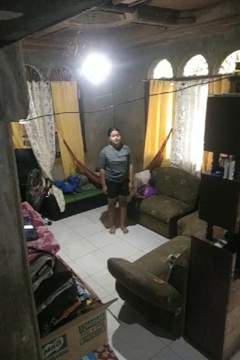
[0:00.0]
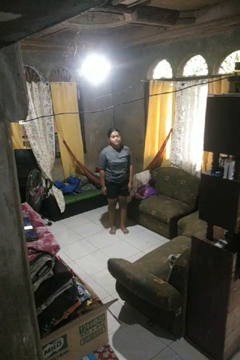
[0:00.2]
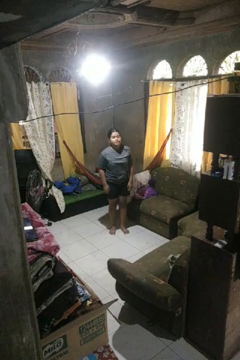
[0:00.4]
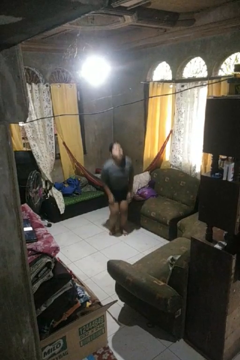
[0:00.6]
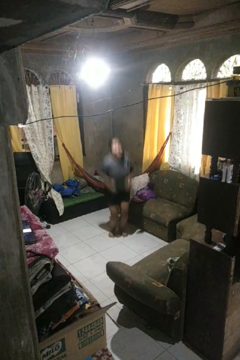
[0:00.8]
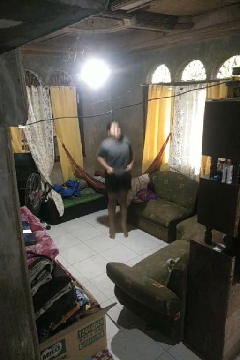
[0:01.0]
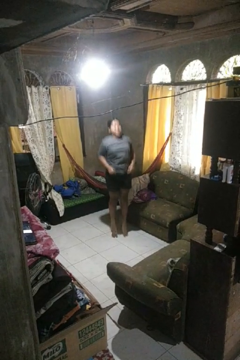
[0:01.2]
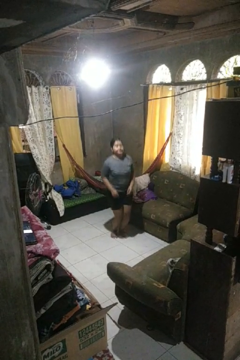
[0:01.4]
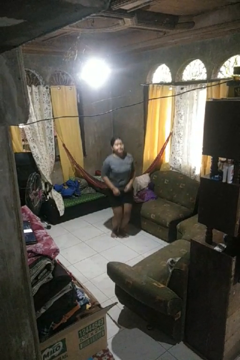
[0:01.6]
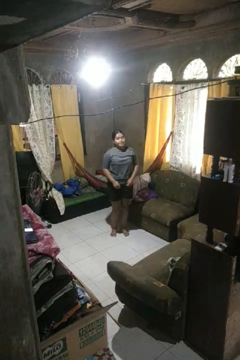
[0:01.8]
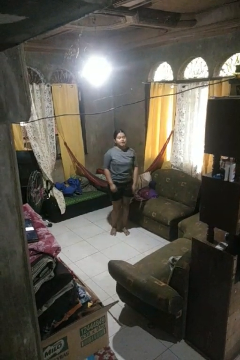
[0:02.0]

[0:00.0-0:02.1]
person jumps

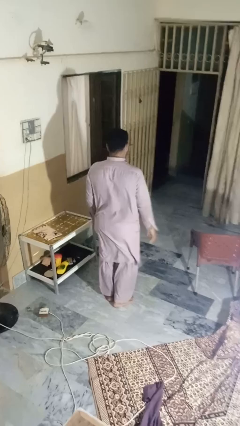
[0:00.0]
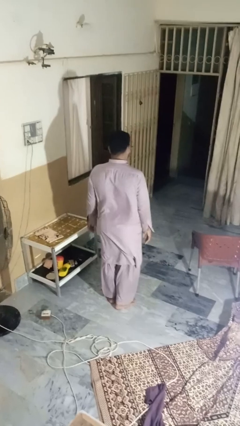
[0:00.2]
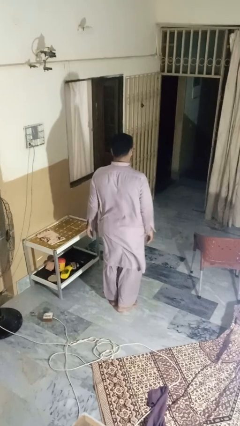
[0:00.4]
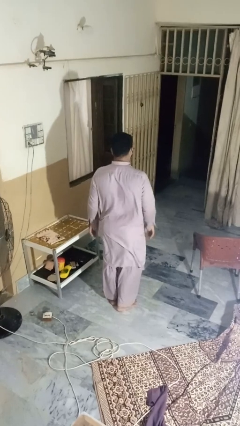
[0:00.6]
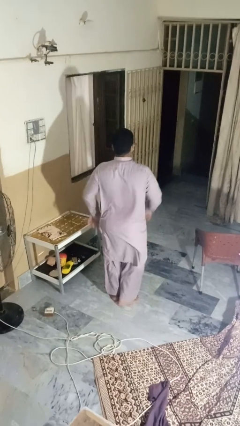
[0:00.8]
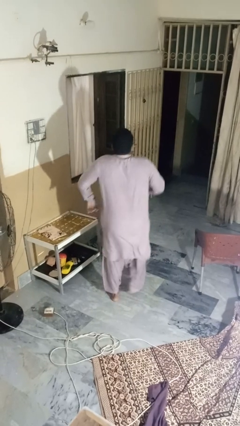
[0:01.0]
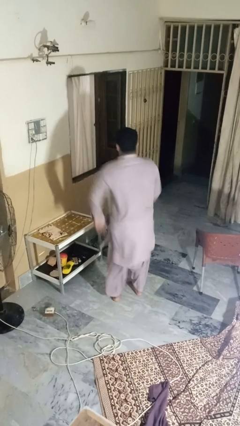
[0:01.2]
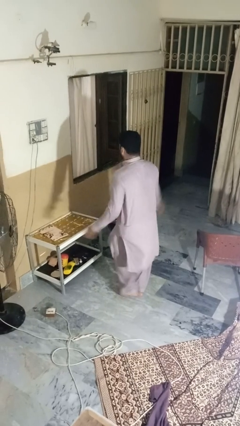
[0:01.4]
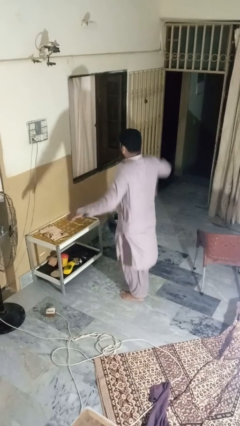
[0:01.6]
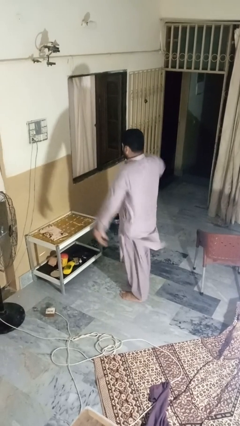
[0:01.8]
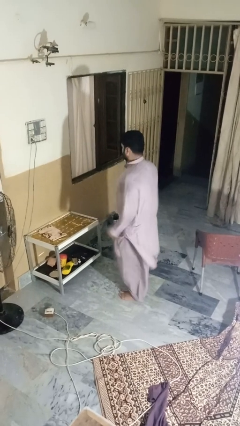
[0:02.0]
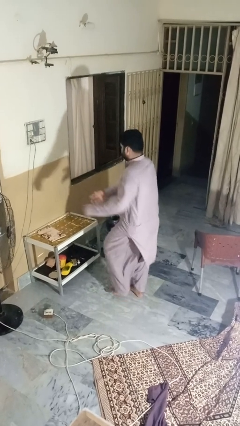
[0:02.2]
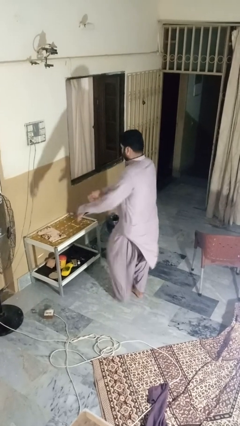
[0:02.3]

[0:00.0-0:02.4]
person dances in place

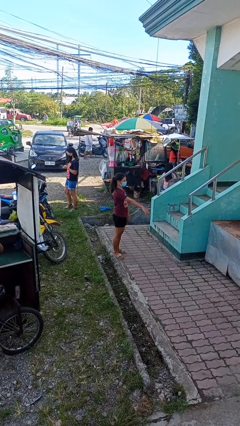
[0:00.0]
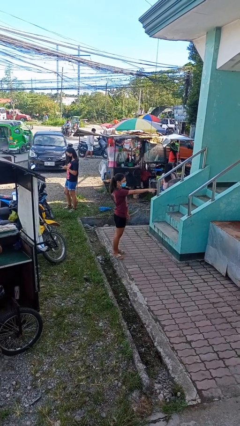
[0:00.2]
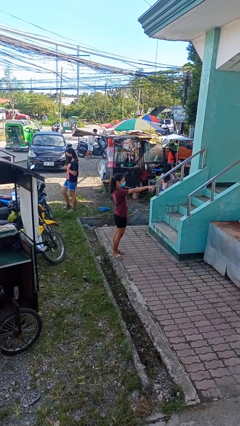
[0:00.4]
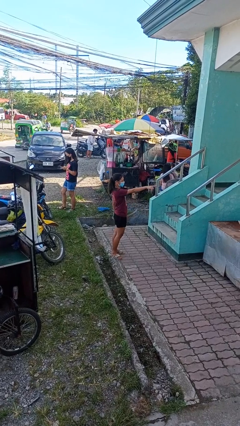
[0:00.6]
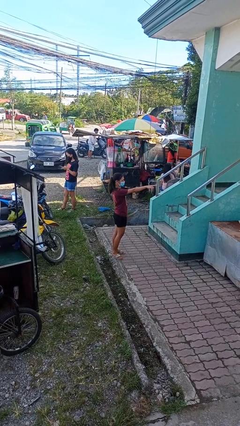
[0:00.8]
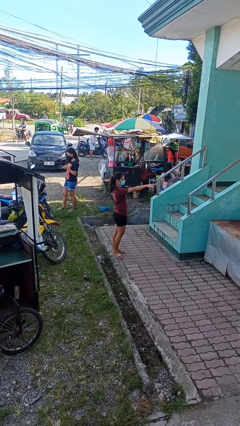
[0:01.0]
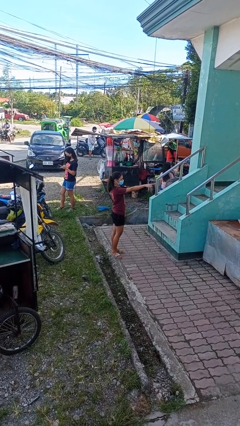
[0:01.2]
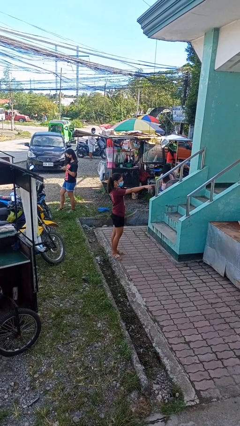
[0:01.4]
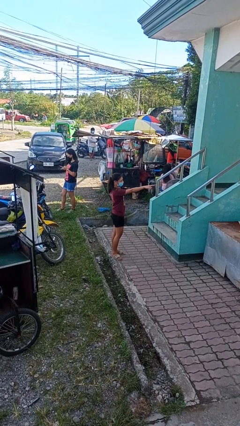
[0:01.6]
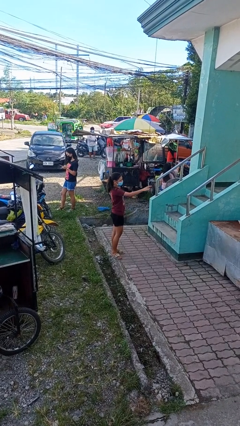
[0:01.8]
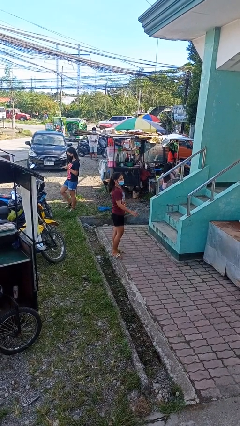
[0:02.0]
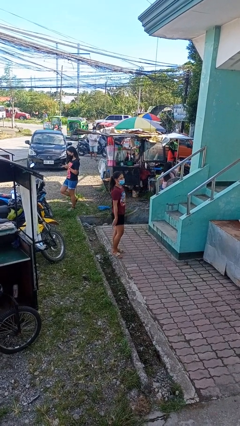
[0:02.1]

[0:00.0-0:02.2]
person points at person

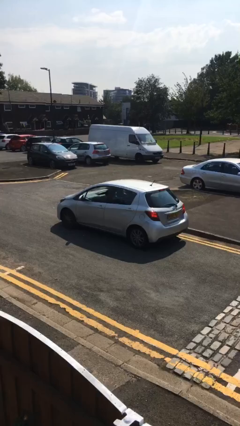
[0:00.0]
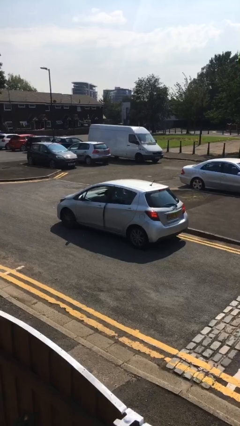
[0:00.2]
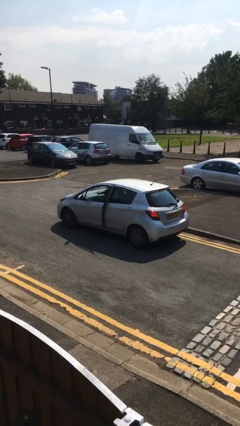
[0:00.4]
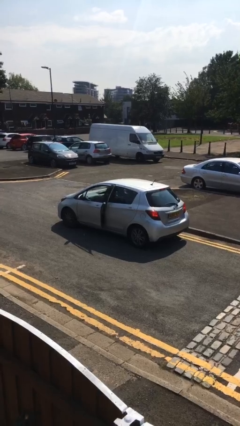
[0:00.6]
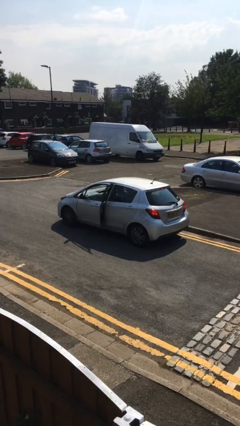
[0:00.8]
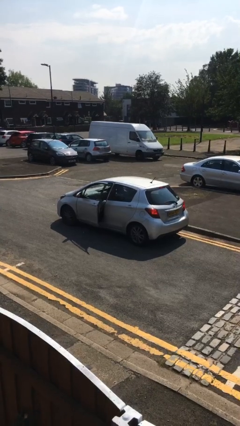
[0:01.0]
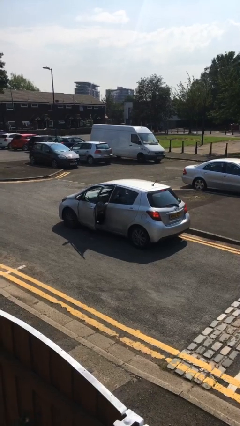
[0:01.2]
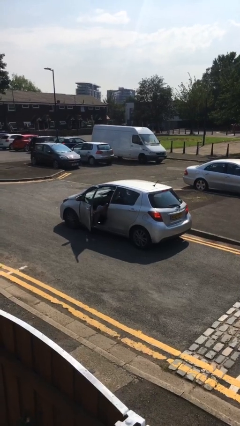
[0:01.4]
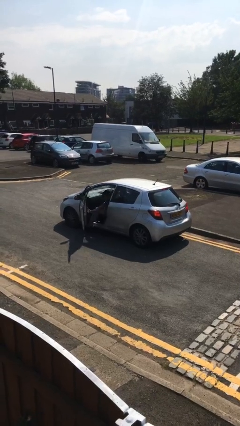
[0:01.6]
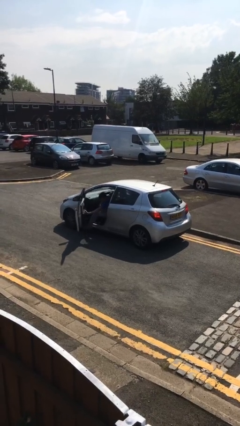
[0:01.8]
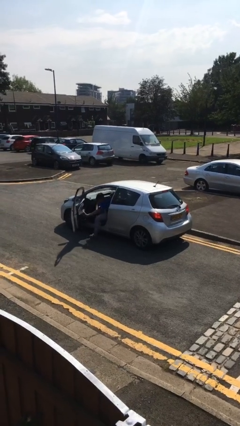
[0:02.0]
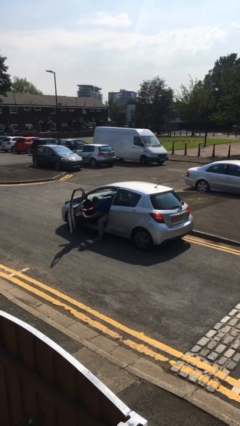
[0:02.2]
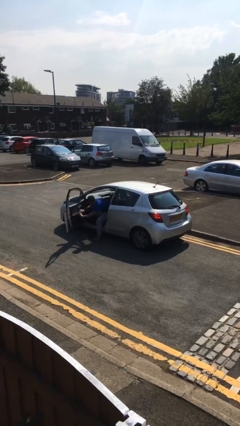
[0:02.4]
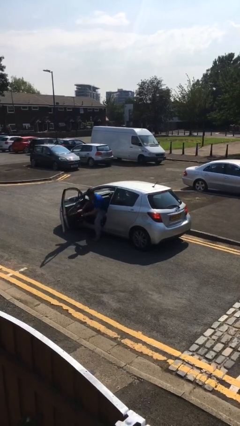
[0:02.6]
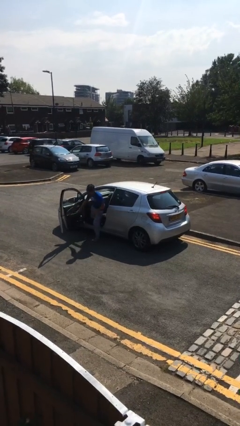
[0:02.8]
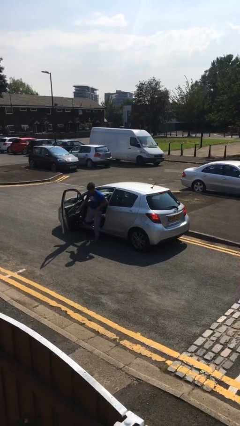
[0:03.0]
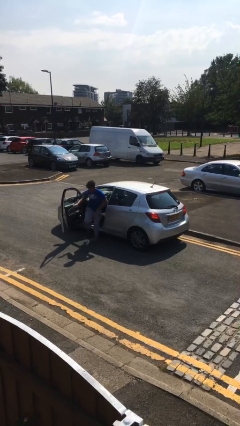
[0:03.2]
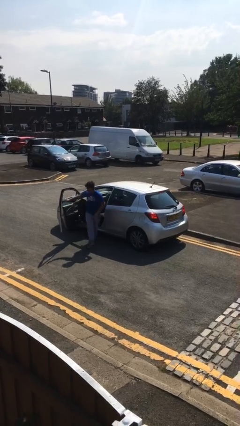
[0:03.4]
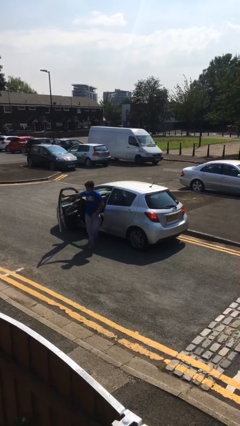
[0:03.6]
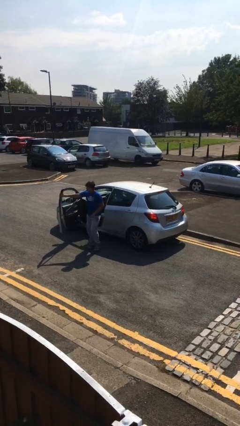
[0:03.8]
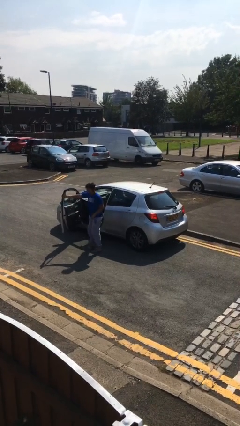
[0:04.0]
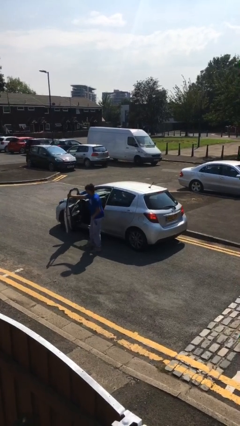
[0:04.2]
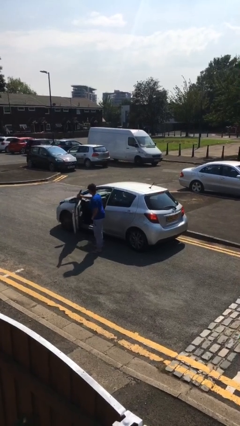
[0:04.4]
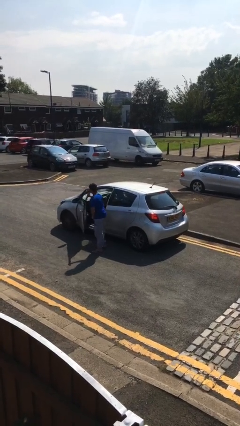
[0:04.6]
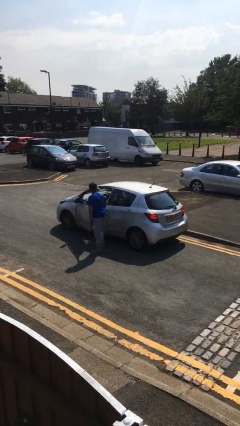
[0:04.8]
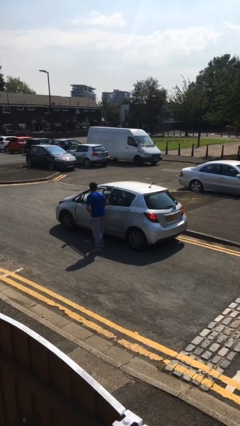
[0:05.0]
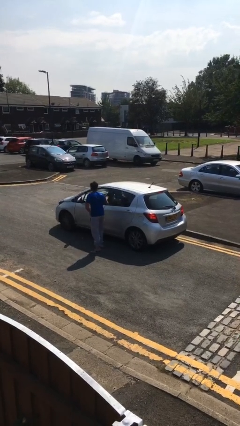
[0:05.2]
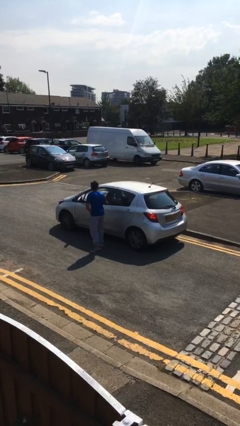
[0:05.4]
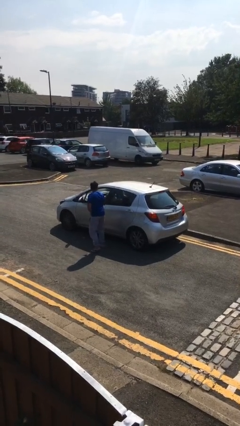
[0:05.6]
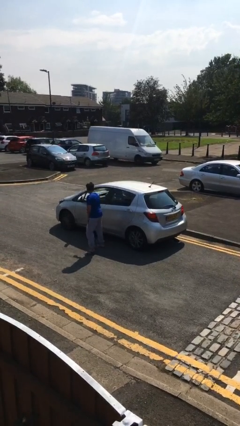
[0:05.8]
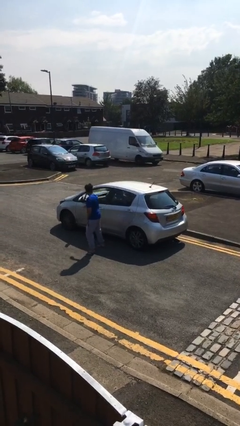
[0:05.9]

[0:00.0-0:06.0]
car drops off person

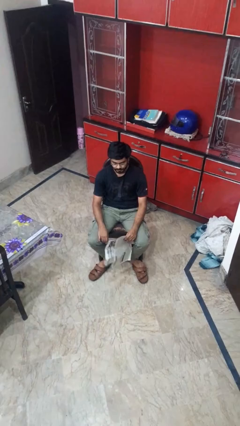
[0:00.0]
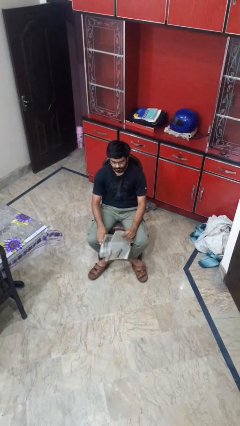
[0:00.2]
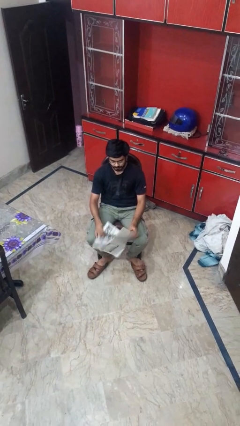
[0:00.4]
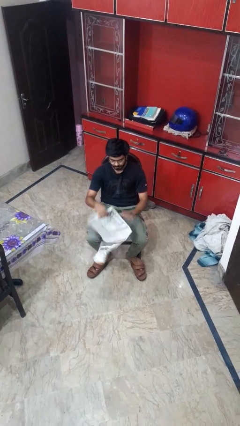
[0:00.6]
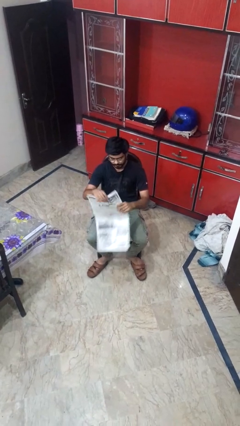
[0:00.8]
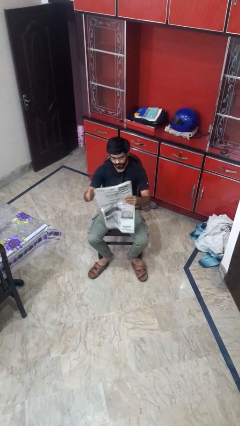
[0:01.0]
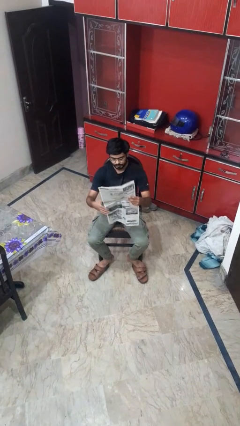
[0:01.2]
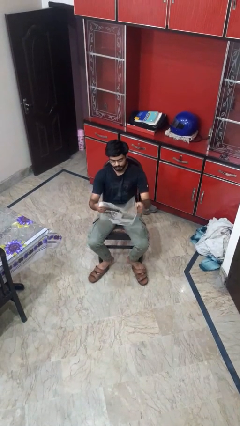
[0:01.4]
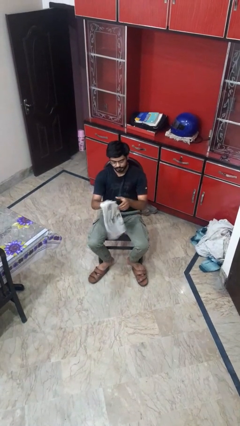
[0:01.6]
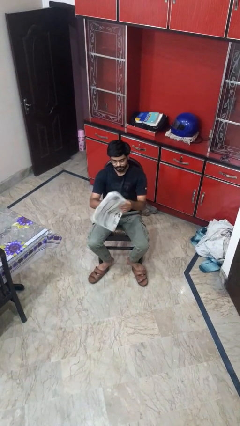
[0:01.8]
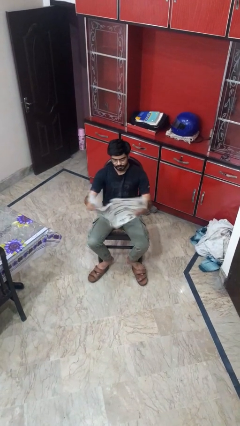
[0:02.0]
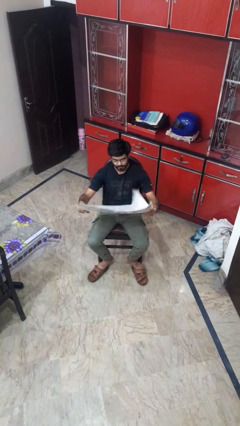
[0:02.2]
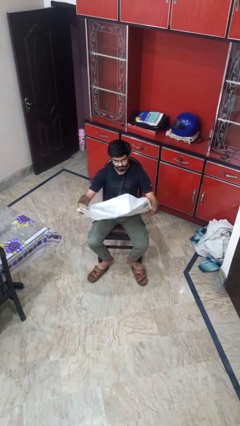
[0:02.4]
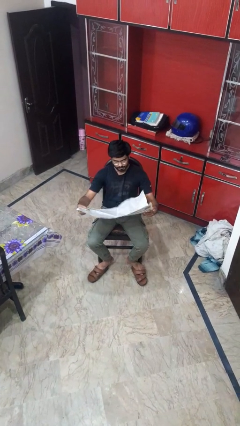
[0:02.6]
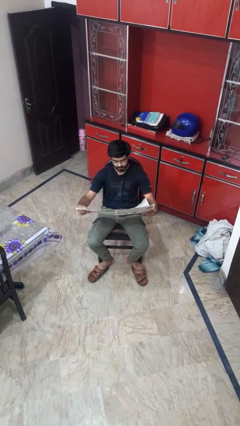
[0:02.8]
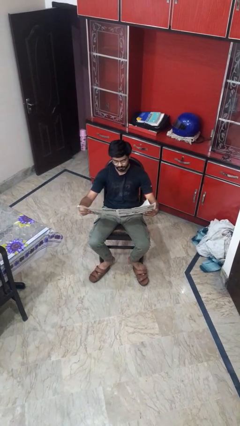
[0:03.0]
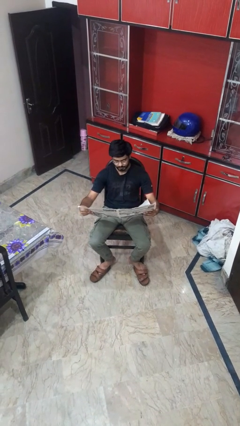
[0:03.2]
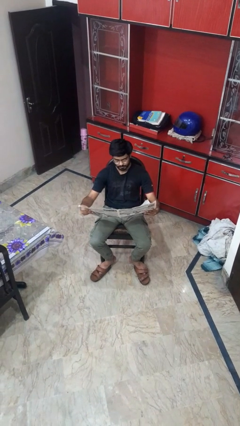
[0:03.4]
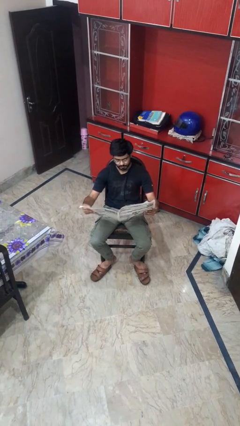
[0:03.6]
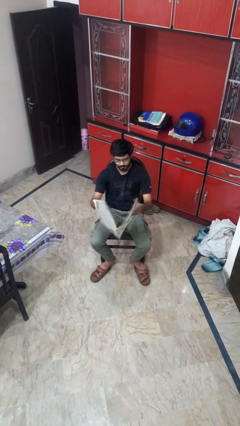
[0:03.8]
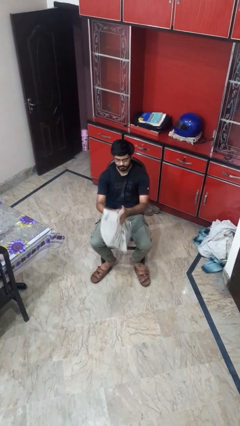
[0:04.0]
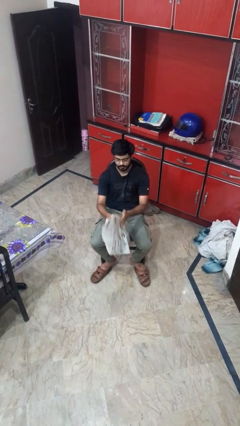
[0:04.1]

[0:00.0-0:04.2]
person reads newspaper

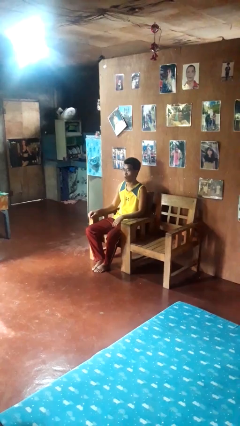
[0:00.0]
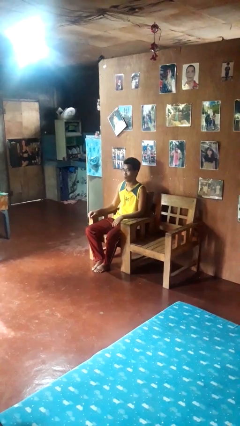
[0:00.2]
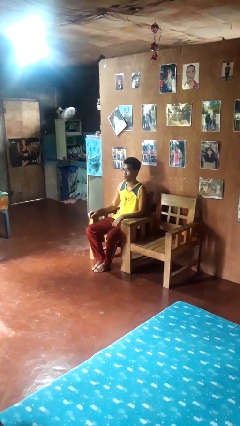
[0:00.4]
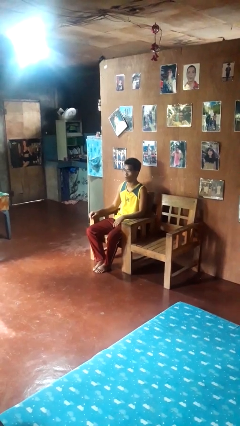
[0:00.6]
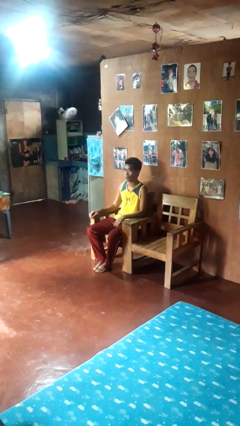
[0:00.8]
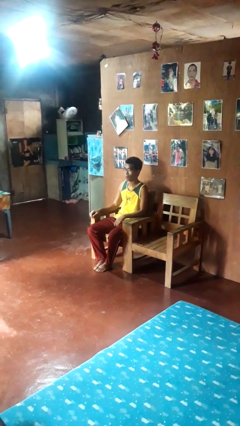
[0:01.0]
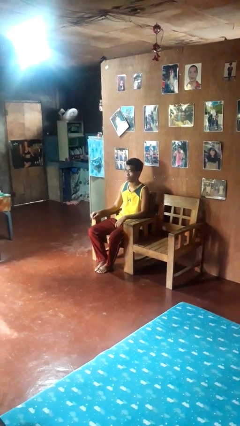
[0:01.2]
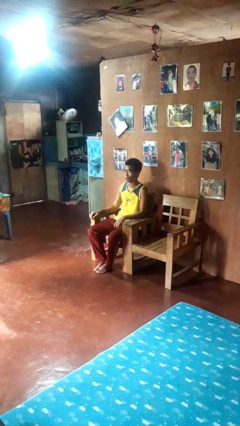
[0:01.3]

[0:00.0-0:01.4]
person shakes head
